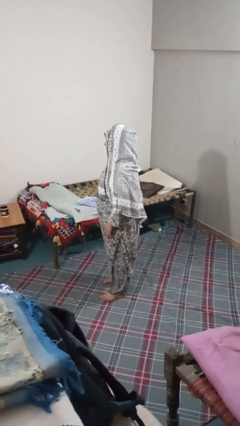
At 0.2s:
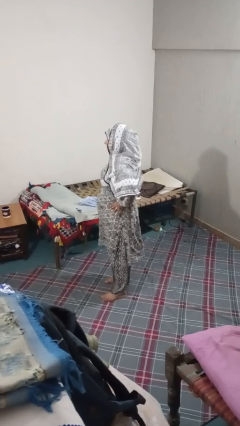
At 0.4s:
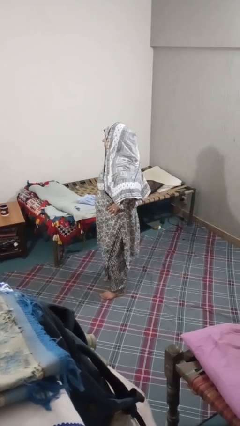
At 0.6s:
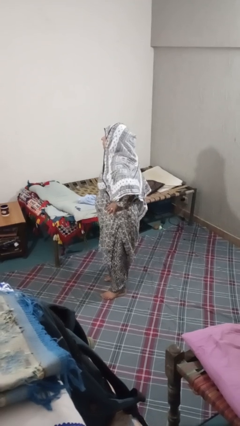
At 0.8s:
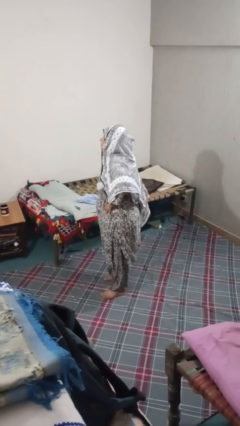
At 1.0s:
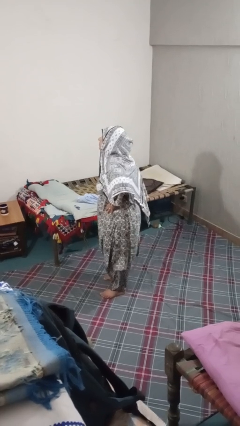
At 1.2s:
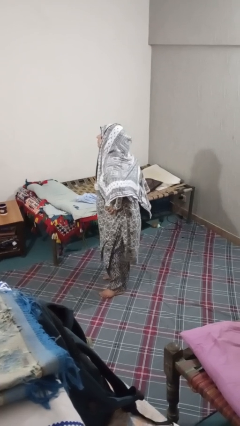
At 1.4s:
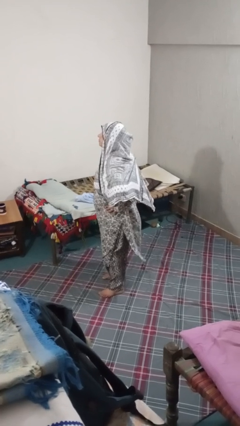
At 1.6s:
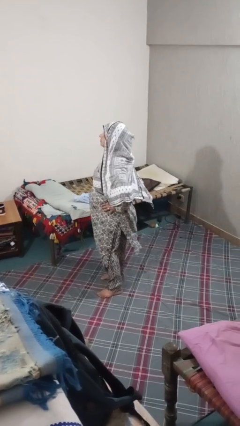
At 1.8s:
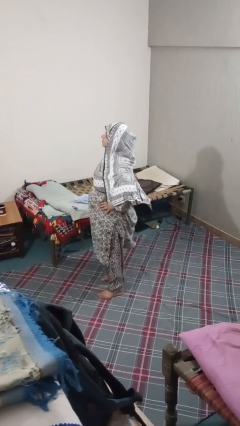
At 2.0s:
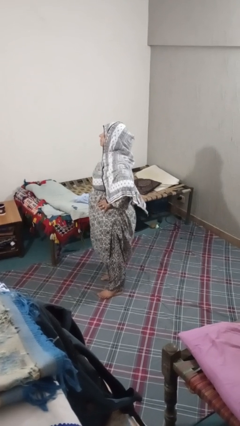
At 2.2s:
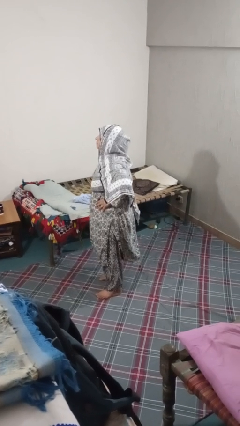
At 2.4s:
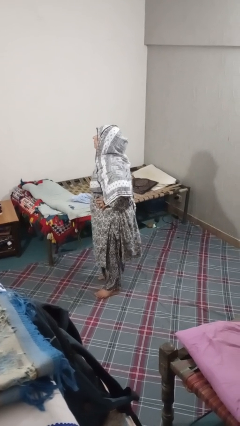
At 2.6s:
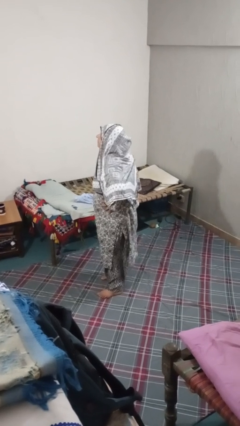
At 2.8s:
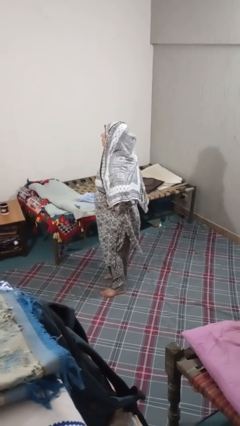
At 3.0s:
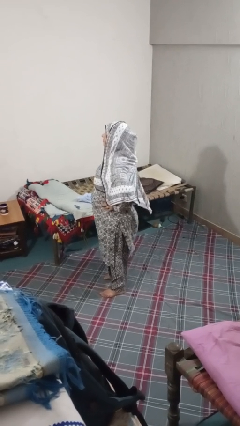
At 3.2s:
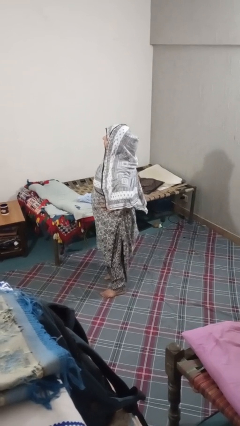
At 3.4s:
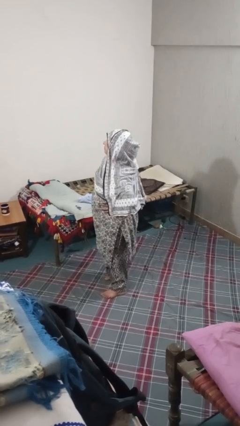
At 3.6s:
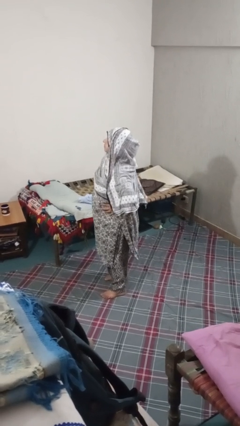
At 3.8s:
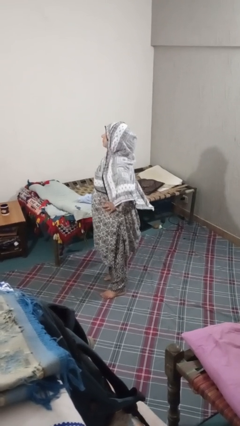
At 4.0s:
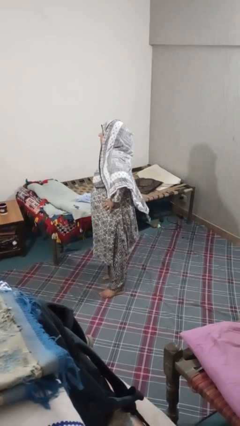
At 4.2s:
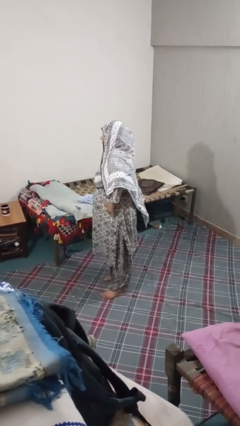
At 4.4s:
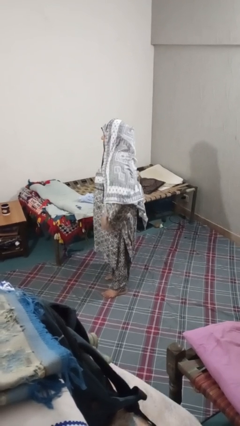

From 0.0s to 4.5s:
person wiggles hips

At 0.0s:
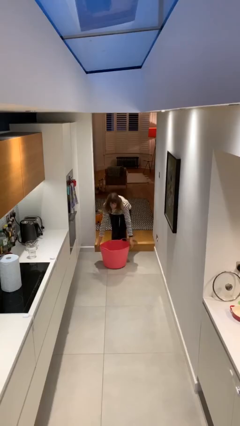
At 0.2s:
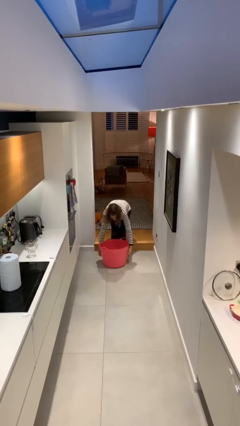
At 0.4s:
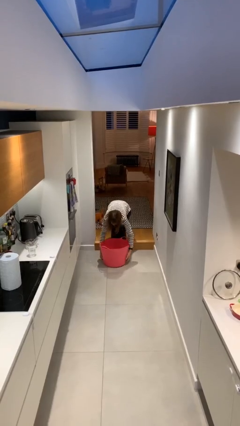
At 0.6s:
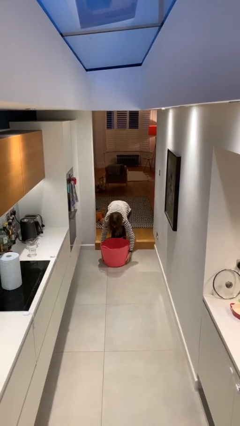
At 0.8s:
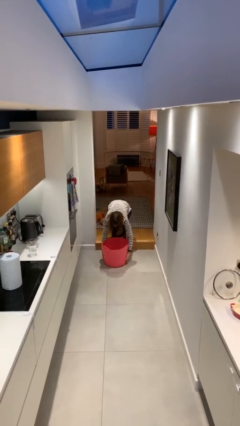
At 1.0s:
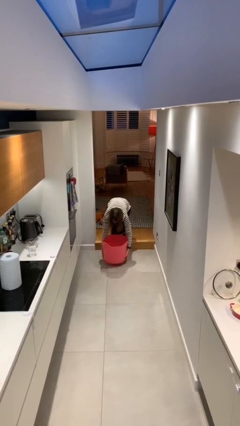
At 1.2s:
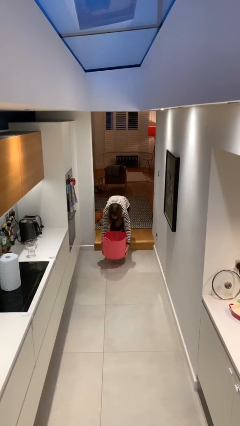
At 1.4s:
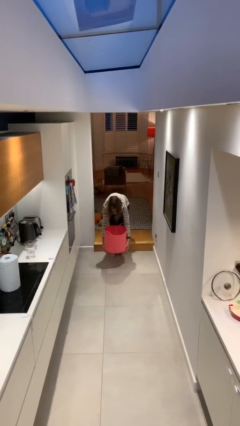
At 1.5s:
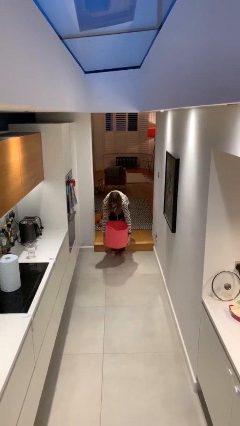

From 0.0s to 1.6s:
person picks up object from floor

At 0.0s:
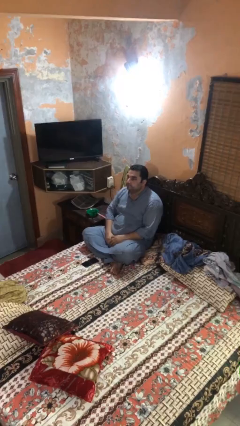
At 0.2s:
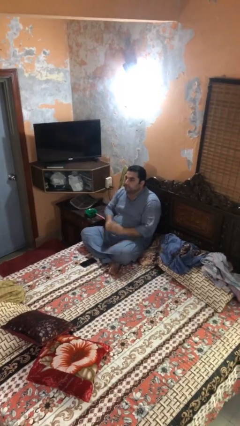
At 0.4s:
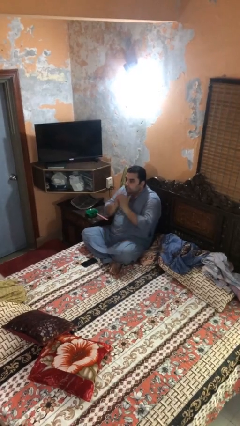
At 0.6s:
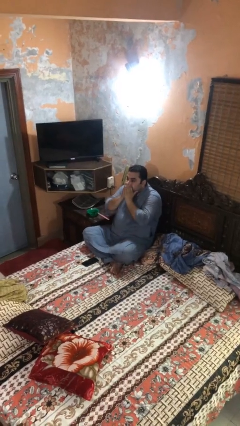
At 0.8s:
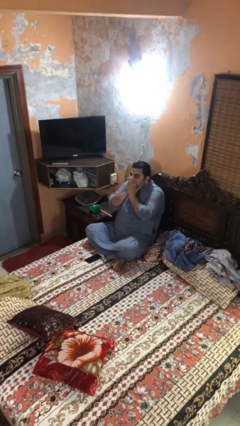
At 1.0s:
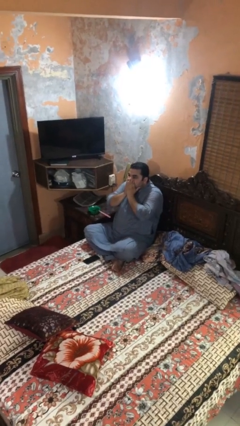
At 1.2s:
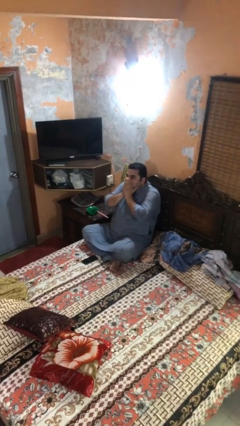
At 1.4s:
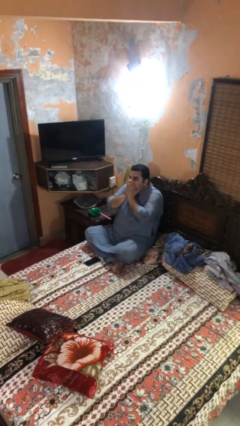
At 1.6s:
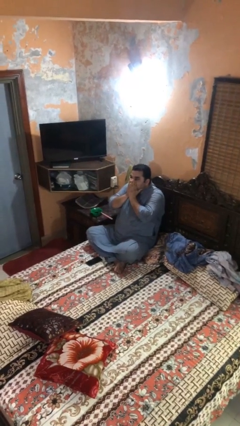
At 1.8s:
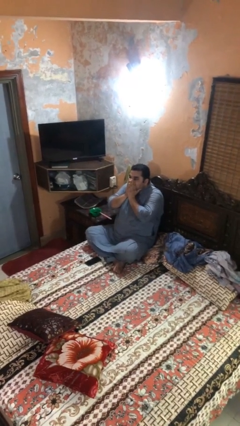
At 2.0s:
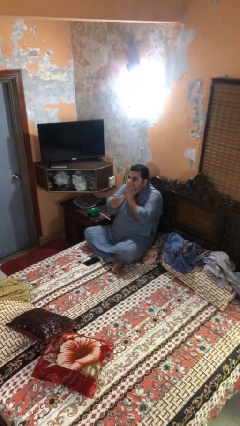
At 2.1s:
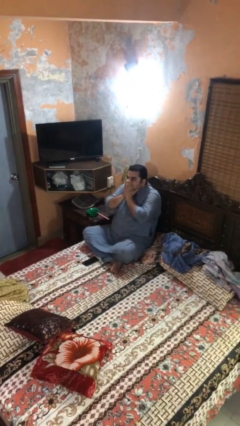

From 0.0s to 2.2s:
person covers face with hands

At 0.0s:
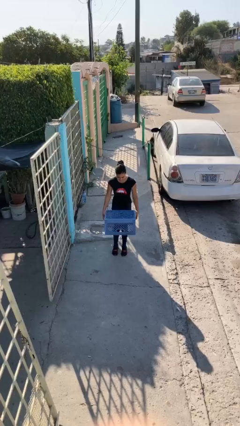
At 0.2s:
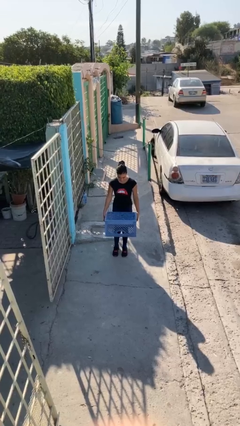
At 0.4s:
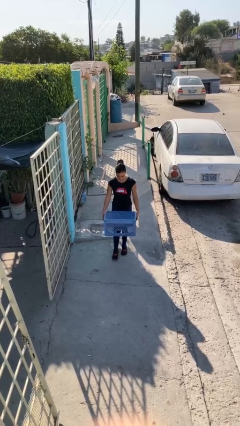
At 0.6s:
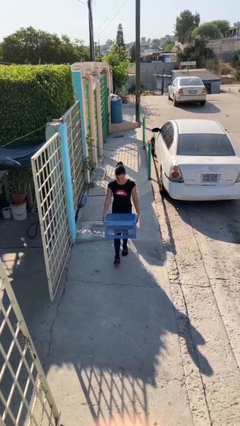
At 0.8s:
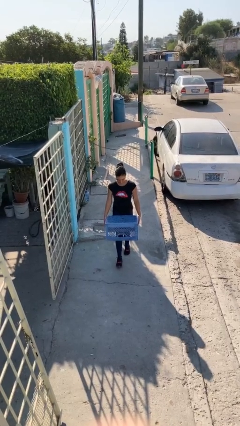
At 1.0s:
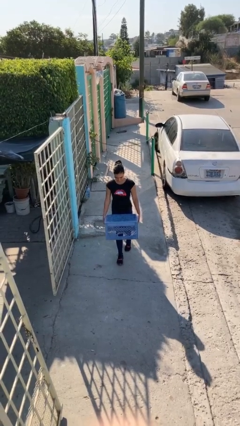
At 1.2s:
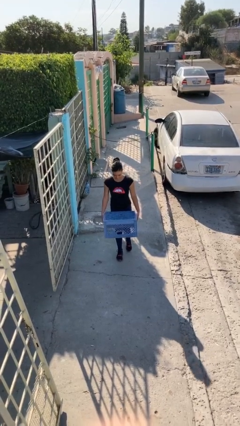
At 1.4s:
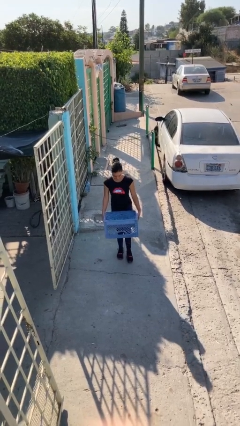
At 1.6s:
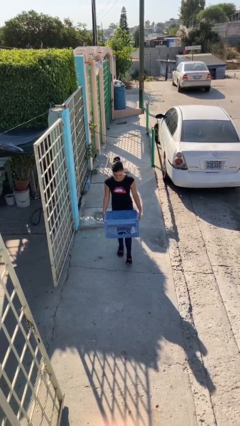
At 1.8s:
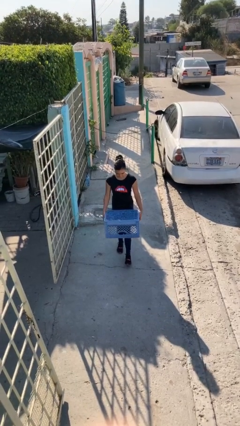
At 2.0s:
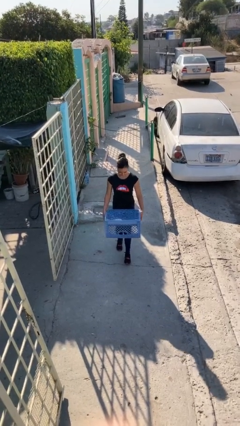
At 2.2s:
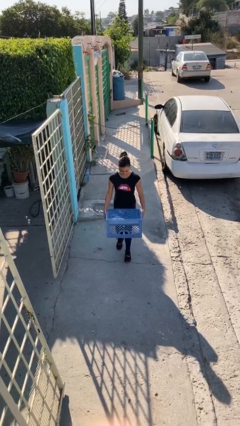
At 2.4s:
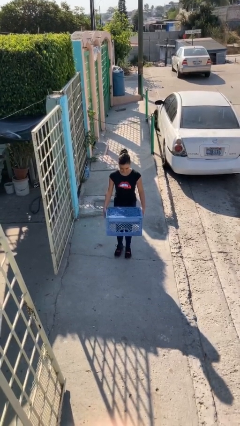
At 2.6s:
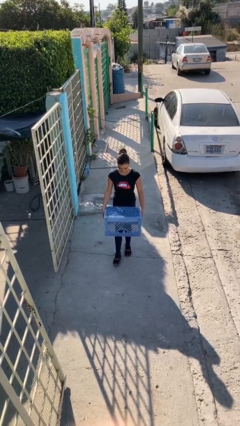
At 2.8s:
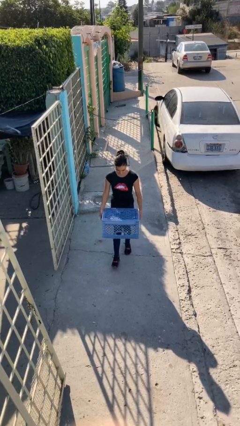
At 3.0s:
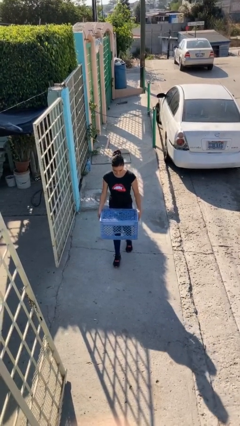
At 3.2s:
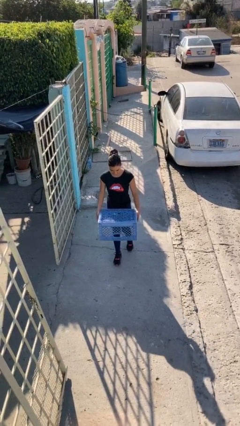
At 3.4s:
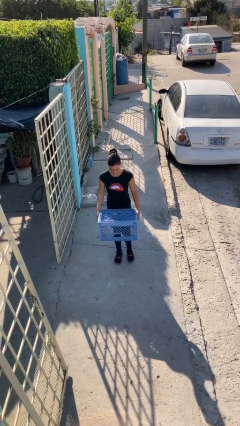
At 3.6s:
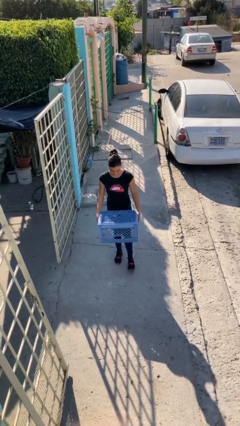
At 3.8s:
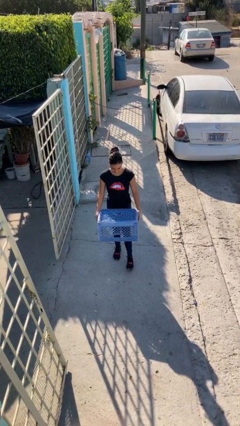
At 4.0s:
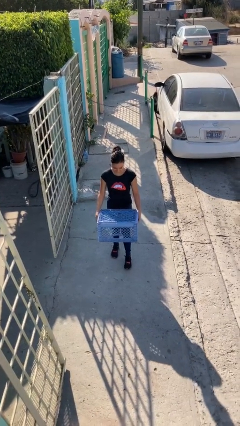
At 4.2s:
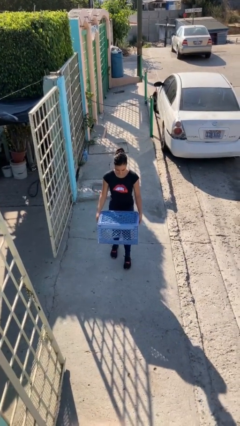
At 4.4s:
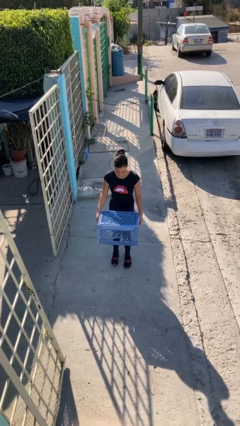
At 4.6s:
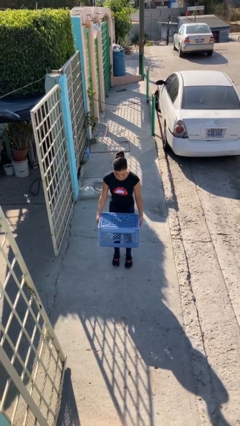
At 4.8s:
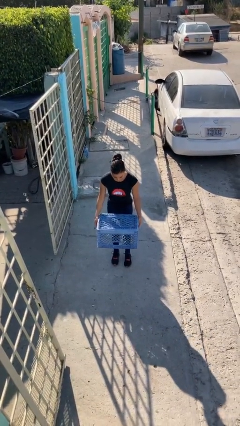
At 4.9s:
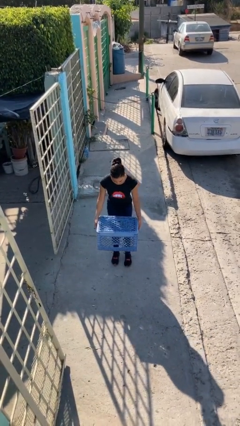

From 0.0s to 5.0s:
person carries heavy object

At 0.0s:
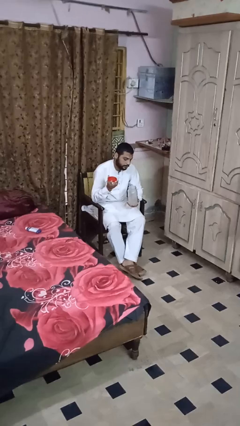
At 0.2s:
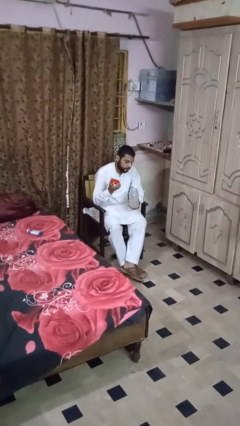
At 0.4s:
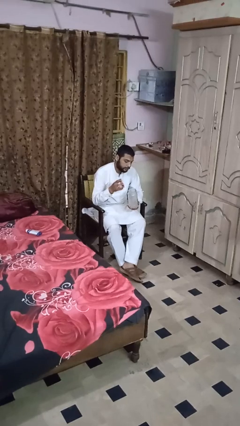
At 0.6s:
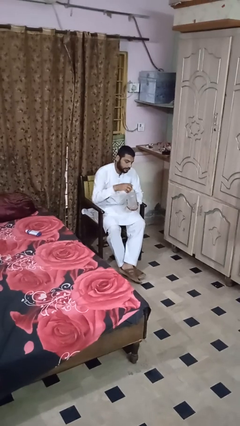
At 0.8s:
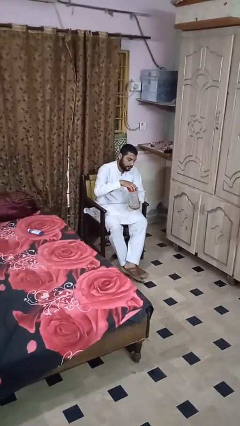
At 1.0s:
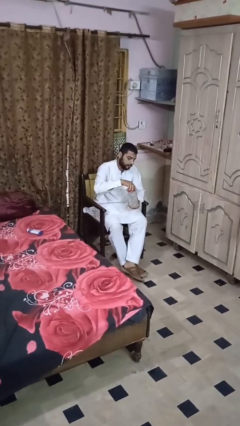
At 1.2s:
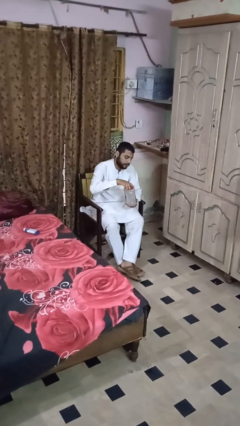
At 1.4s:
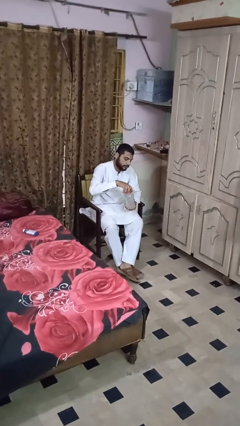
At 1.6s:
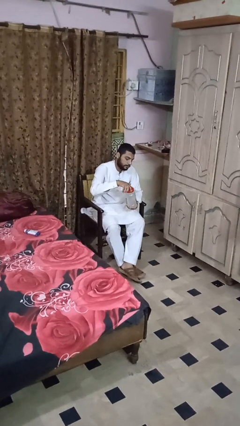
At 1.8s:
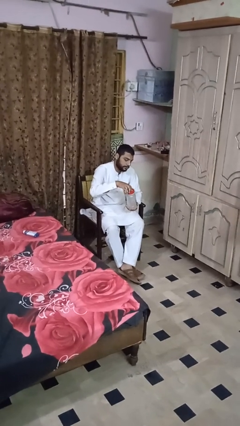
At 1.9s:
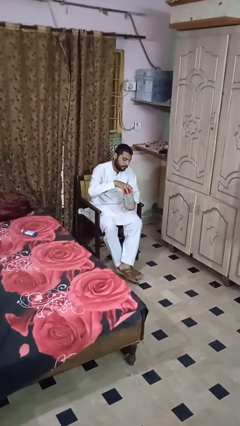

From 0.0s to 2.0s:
person closes jar

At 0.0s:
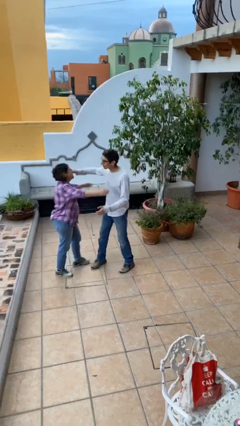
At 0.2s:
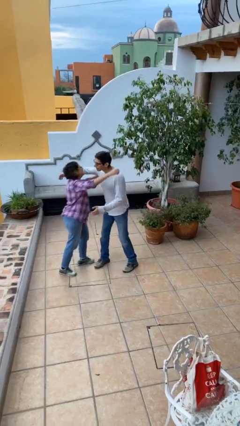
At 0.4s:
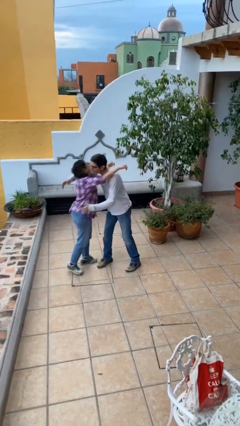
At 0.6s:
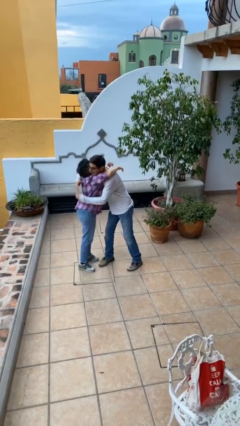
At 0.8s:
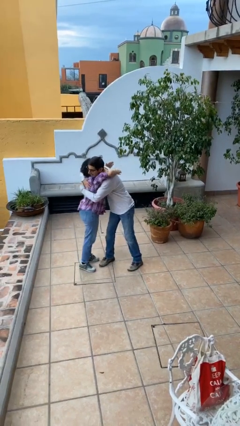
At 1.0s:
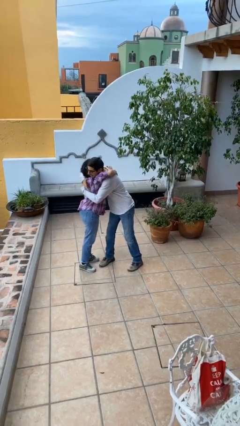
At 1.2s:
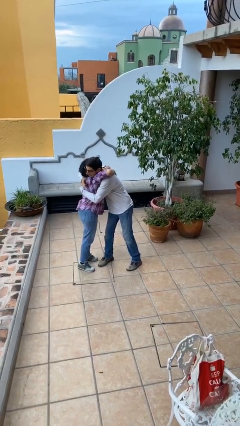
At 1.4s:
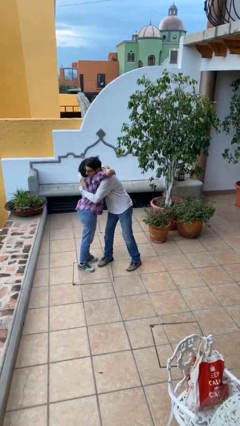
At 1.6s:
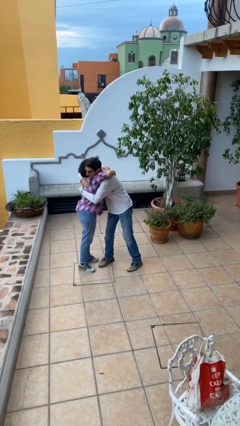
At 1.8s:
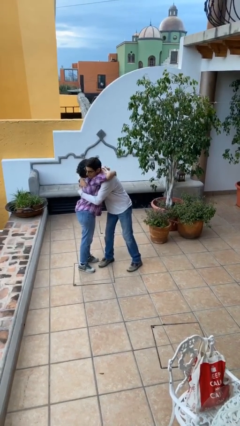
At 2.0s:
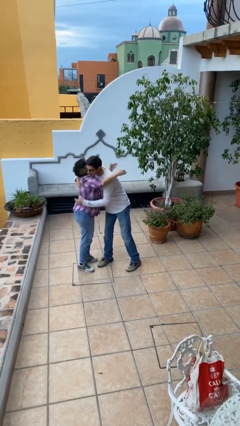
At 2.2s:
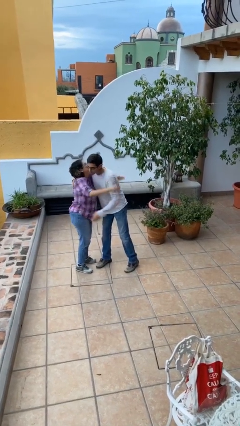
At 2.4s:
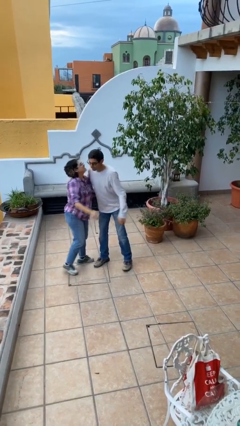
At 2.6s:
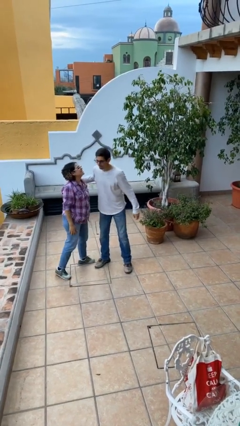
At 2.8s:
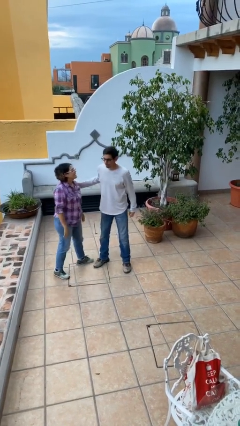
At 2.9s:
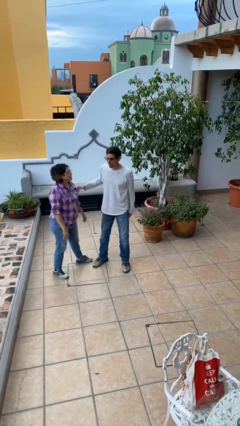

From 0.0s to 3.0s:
person embraces person
